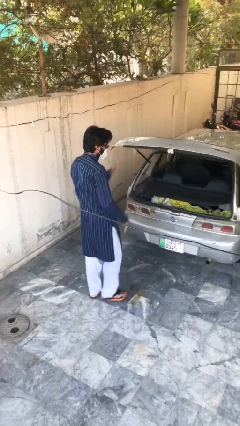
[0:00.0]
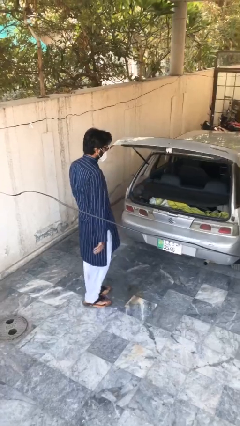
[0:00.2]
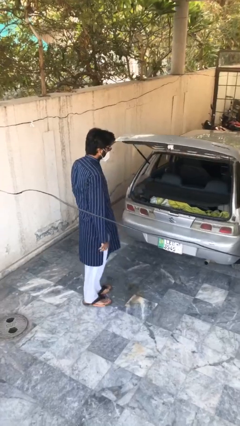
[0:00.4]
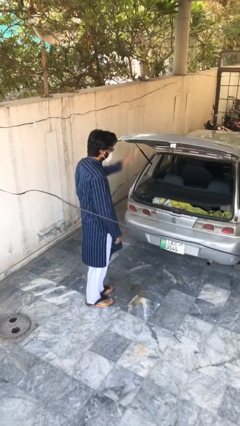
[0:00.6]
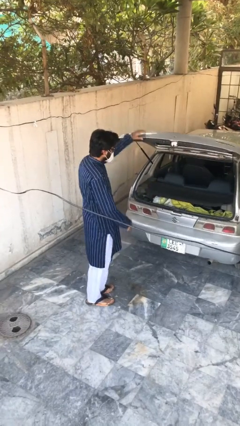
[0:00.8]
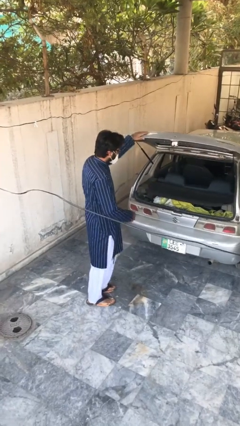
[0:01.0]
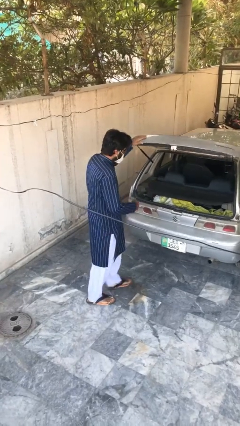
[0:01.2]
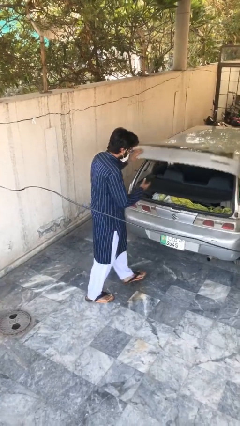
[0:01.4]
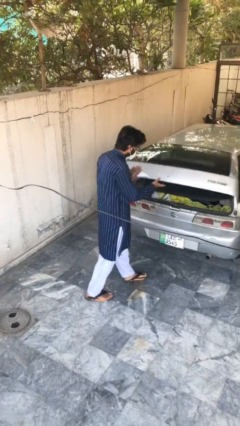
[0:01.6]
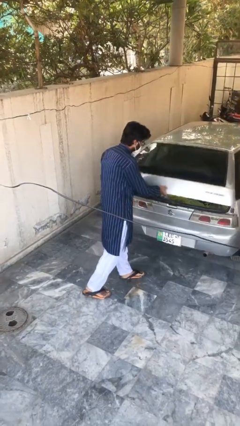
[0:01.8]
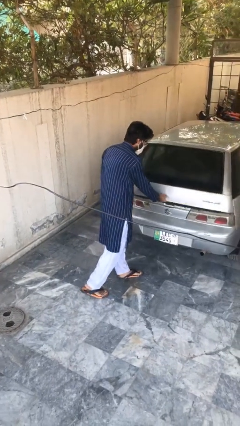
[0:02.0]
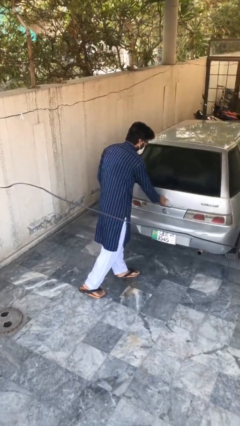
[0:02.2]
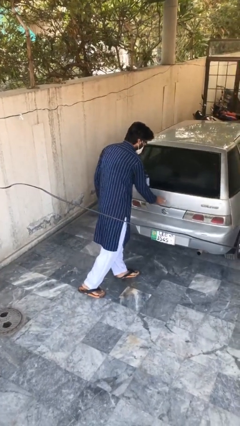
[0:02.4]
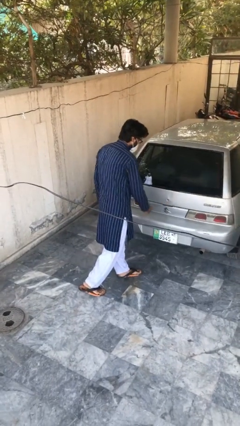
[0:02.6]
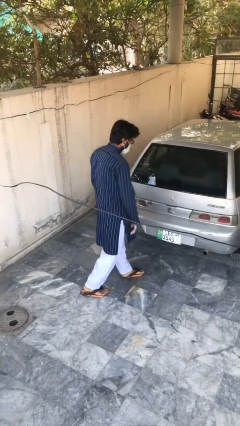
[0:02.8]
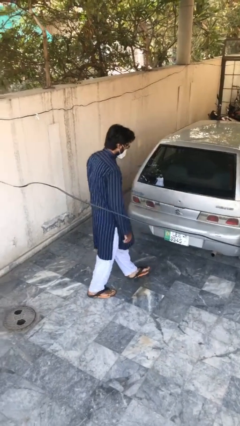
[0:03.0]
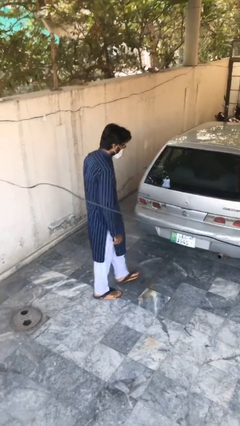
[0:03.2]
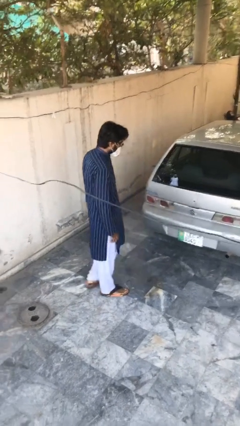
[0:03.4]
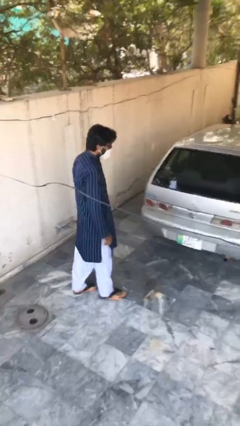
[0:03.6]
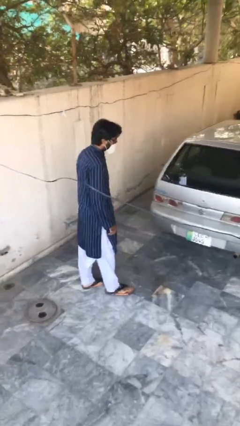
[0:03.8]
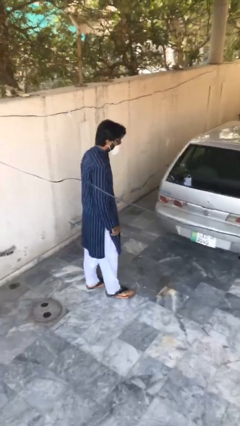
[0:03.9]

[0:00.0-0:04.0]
person closes car trunk

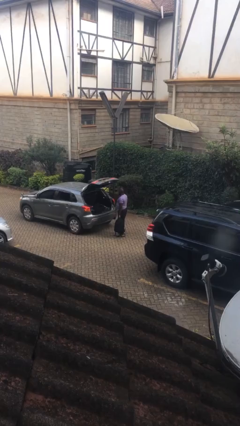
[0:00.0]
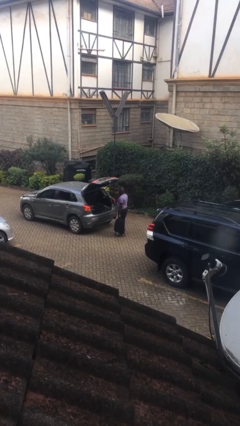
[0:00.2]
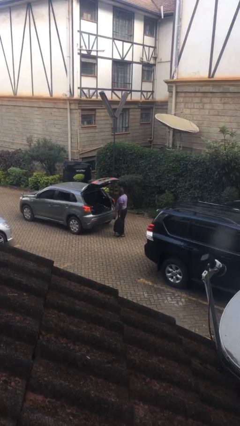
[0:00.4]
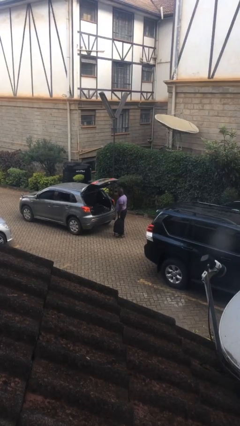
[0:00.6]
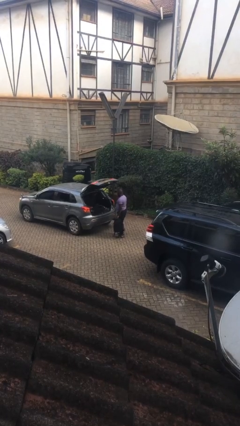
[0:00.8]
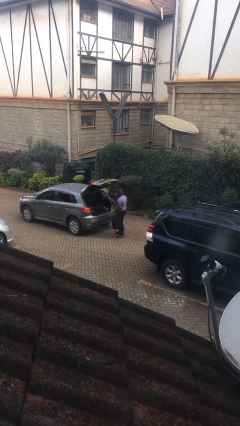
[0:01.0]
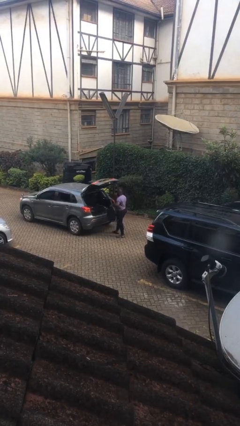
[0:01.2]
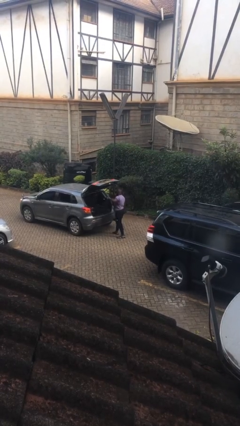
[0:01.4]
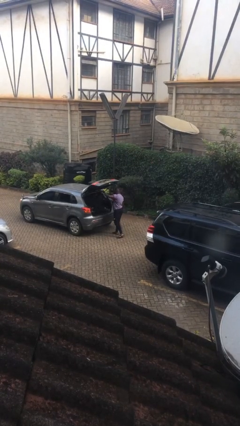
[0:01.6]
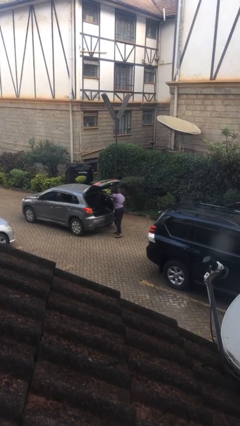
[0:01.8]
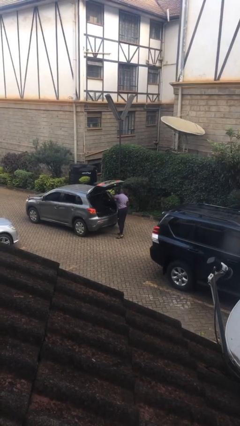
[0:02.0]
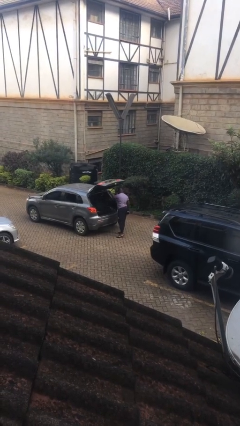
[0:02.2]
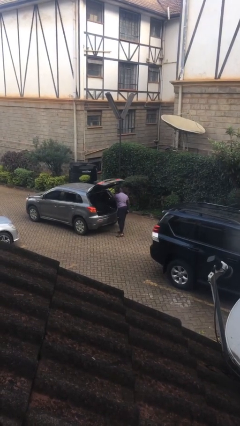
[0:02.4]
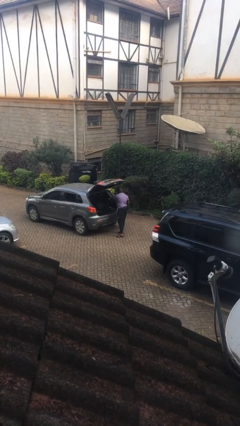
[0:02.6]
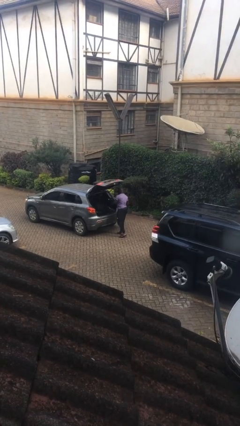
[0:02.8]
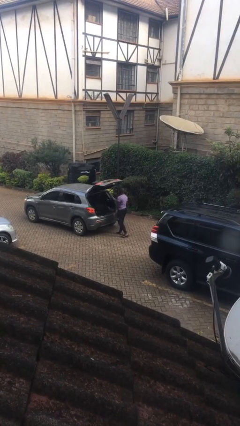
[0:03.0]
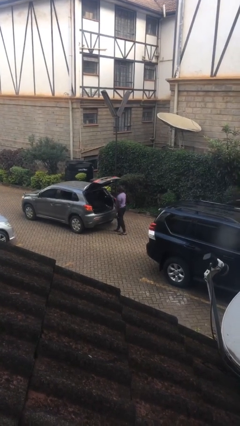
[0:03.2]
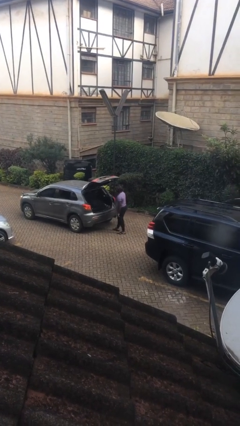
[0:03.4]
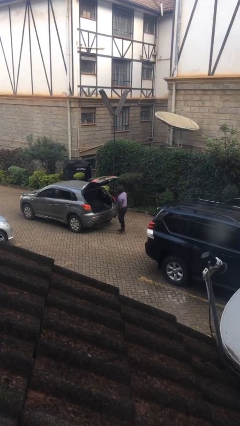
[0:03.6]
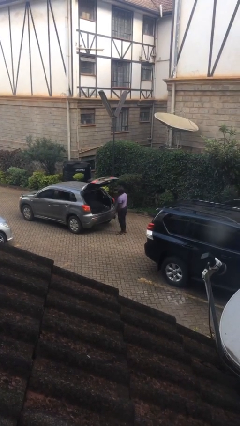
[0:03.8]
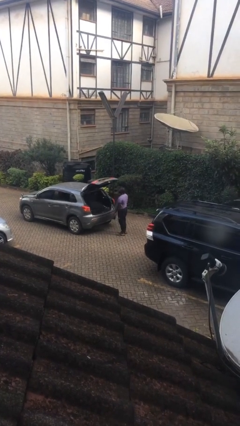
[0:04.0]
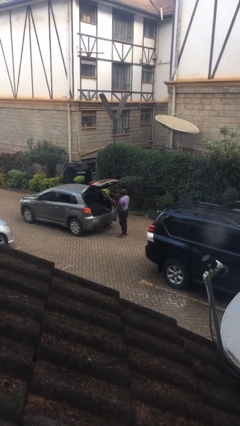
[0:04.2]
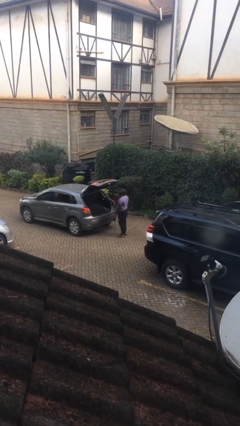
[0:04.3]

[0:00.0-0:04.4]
person loads car

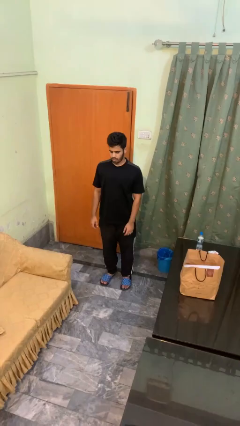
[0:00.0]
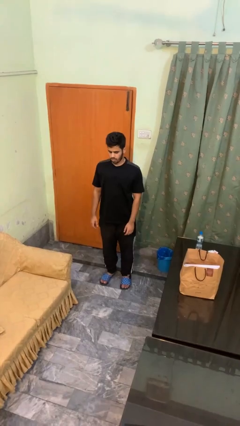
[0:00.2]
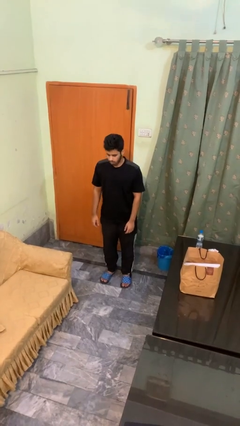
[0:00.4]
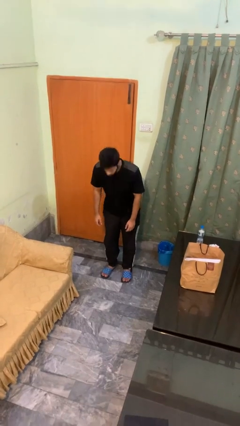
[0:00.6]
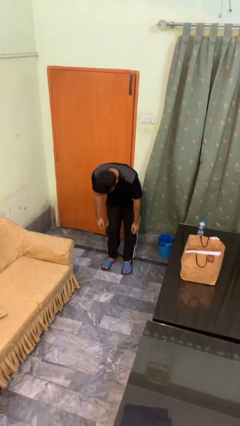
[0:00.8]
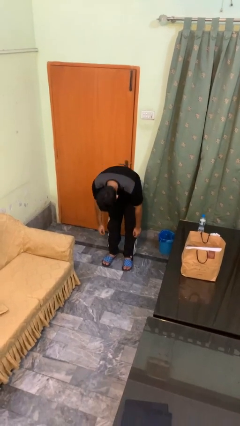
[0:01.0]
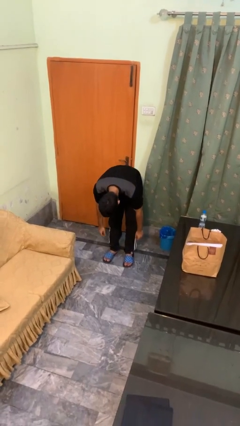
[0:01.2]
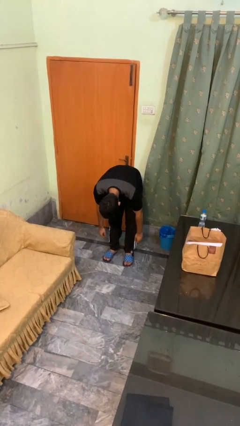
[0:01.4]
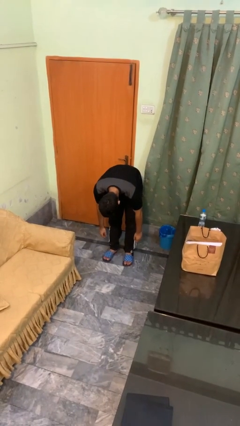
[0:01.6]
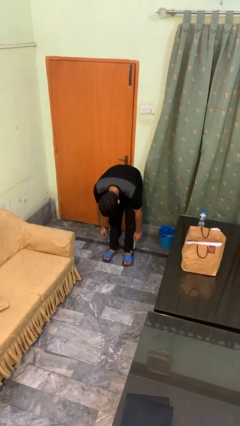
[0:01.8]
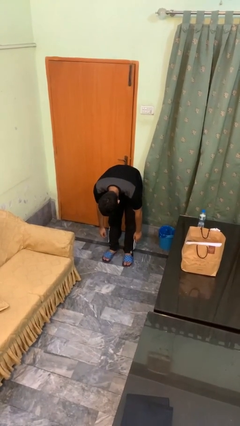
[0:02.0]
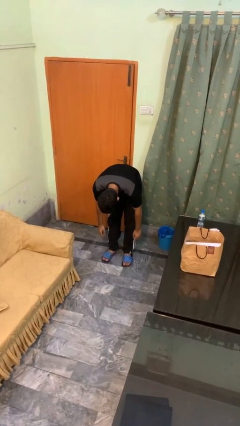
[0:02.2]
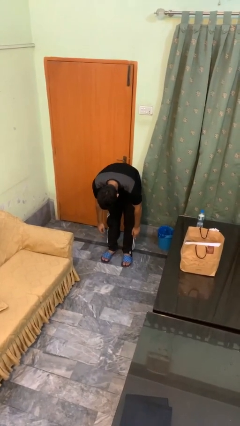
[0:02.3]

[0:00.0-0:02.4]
person bows

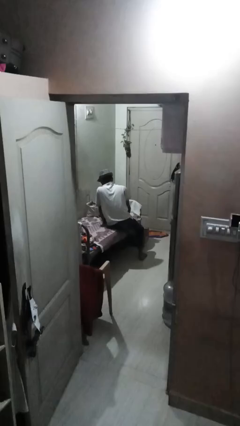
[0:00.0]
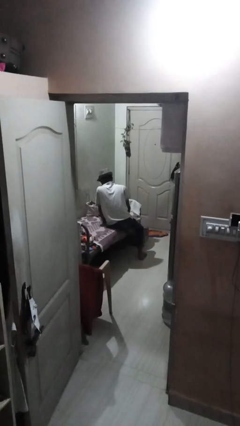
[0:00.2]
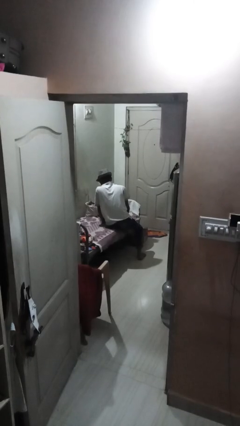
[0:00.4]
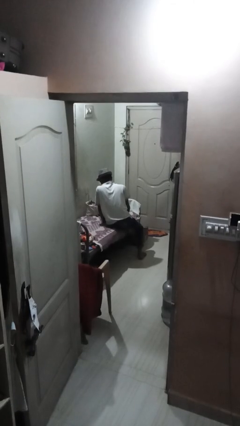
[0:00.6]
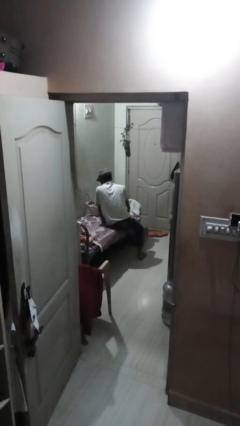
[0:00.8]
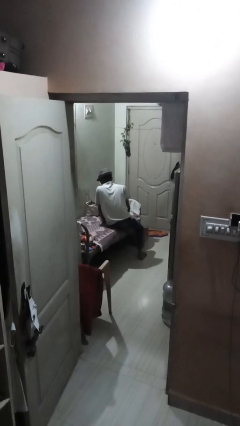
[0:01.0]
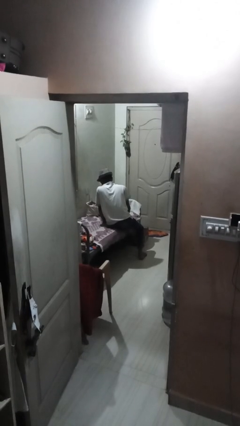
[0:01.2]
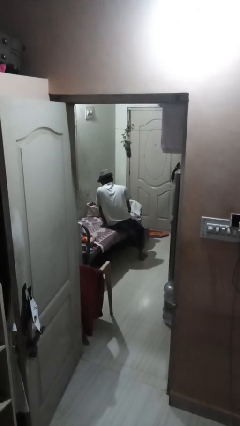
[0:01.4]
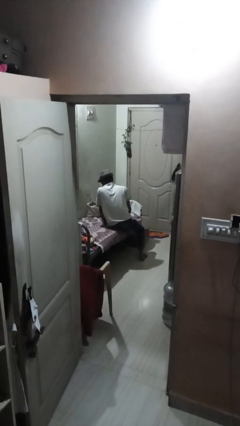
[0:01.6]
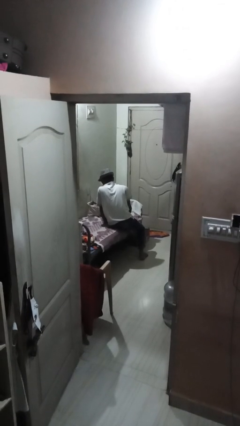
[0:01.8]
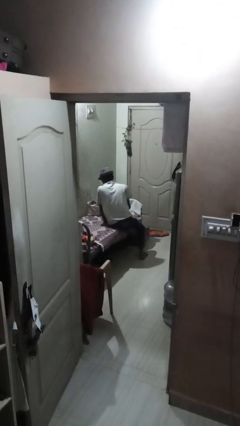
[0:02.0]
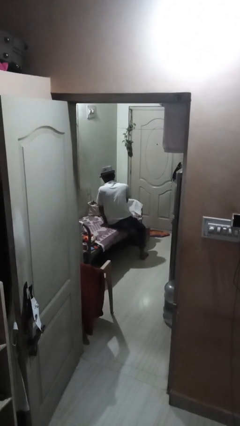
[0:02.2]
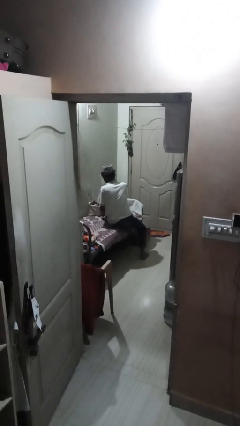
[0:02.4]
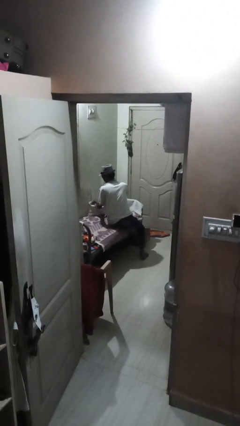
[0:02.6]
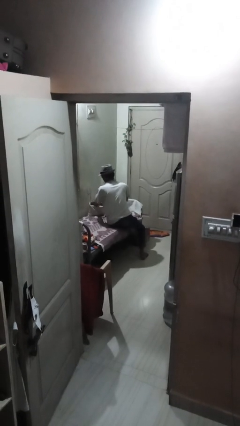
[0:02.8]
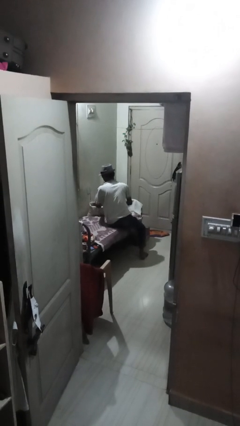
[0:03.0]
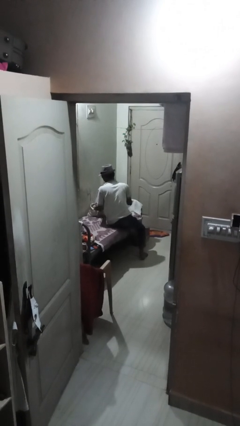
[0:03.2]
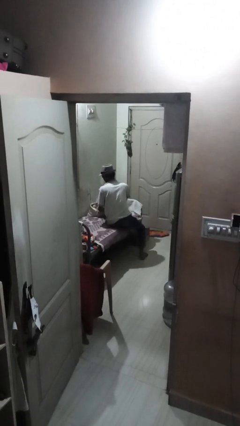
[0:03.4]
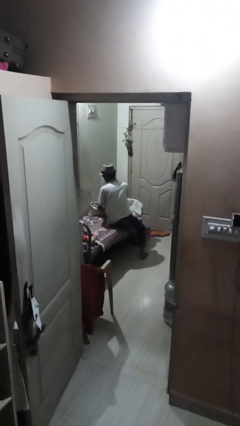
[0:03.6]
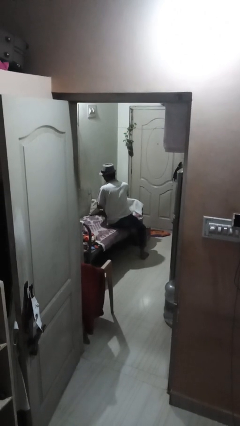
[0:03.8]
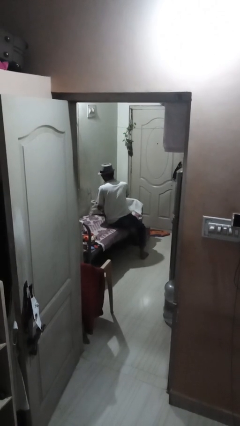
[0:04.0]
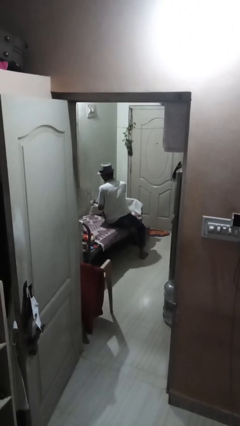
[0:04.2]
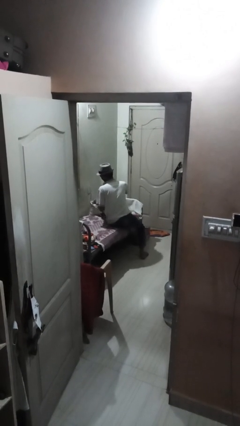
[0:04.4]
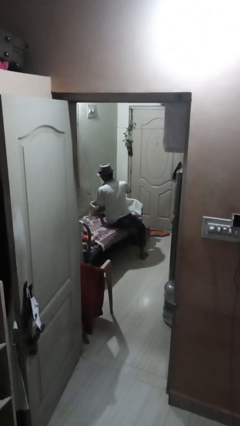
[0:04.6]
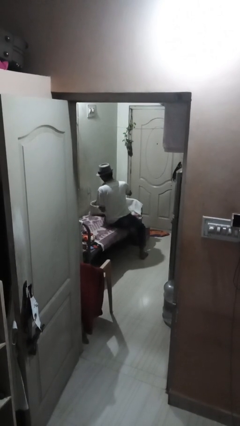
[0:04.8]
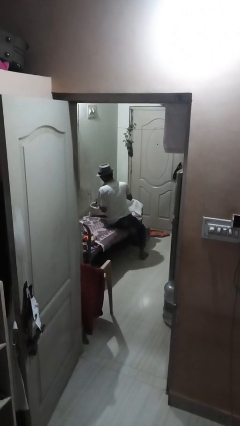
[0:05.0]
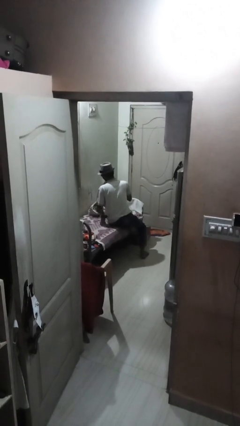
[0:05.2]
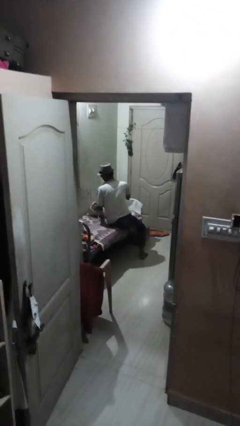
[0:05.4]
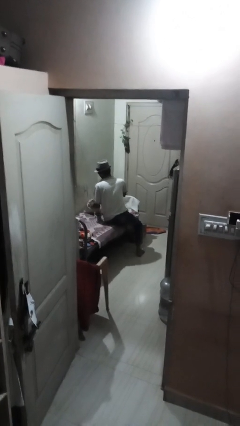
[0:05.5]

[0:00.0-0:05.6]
person searches in bag

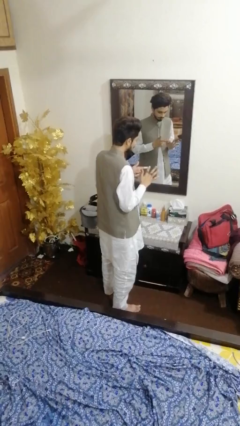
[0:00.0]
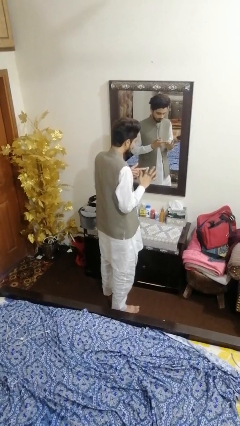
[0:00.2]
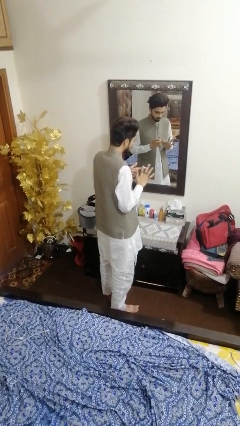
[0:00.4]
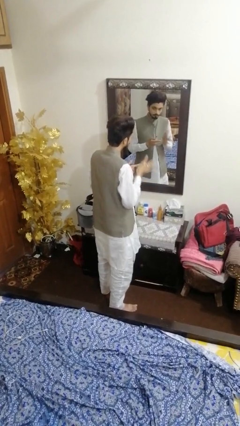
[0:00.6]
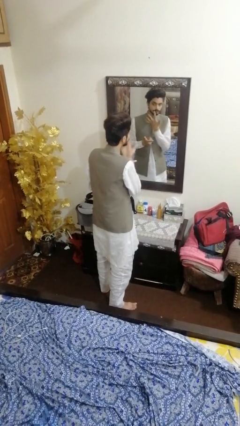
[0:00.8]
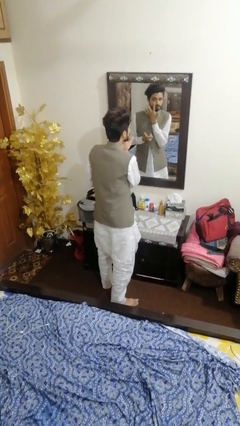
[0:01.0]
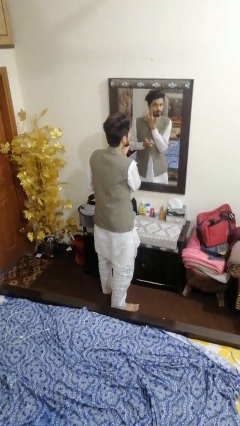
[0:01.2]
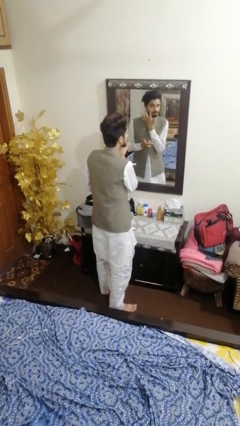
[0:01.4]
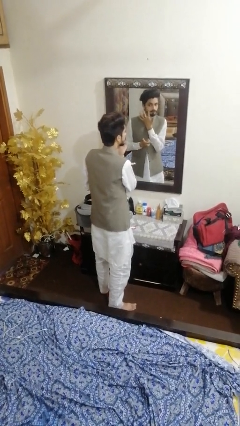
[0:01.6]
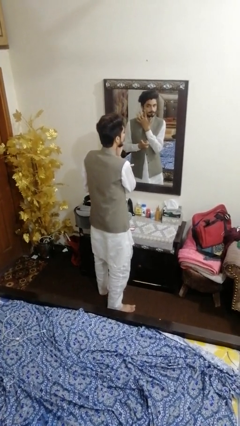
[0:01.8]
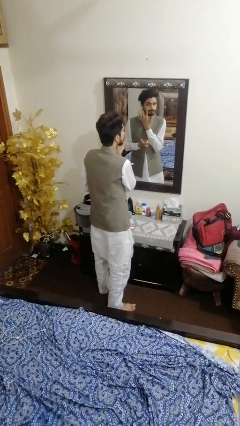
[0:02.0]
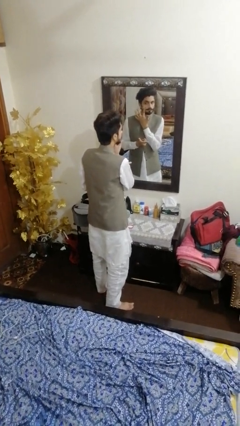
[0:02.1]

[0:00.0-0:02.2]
person applies foundation makeup
